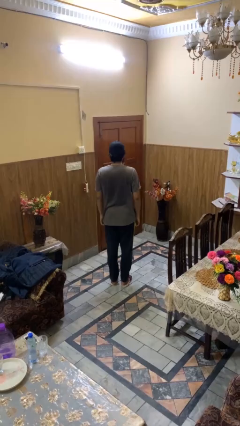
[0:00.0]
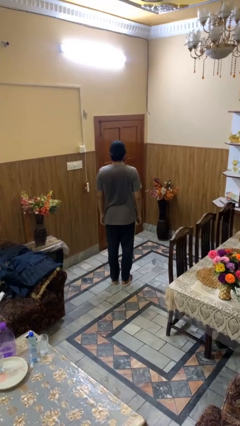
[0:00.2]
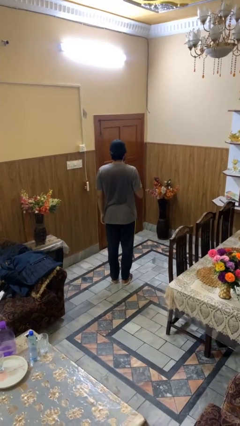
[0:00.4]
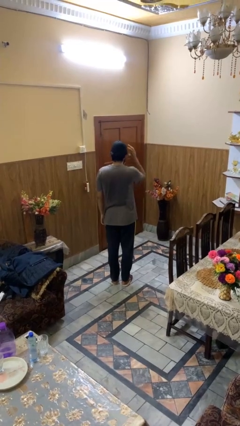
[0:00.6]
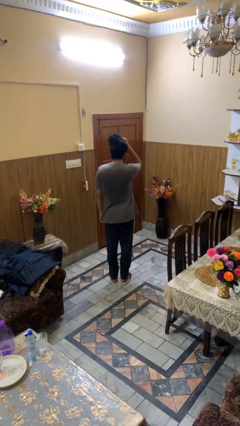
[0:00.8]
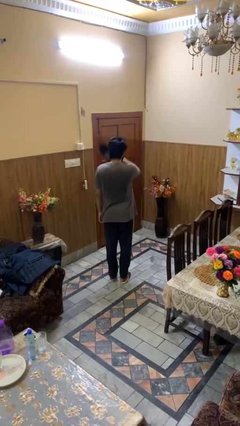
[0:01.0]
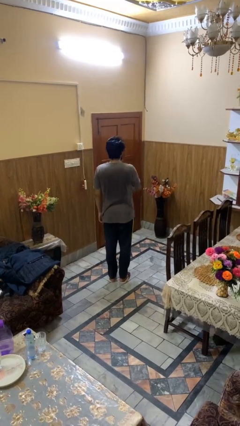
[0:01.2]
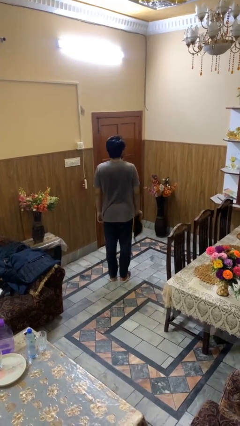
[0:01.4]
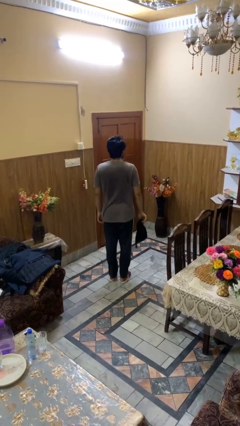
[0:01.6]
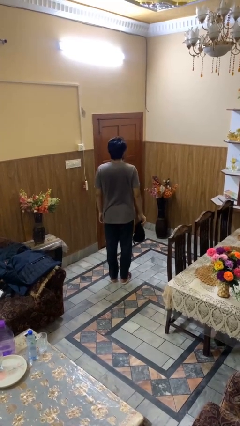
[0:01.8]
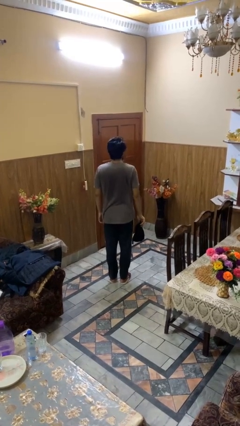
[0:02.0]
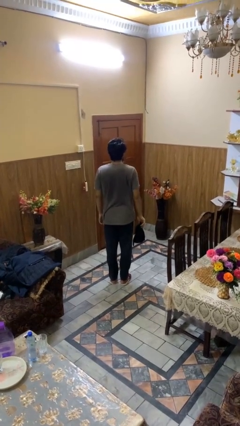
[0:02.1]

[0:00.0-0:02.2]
person takes off hat

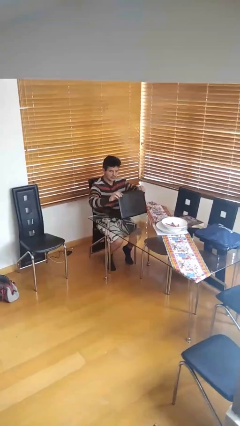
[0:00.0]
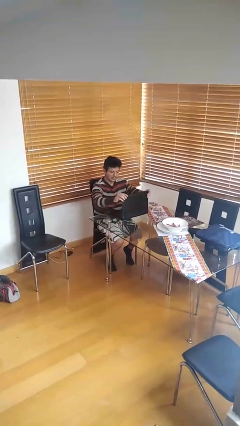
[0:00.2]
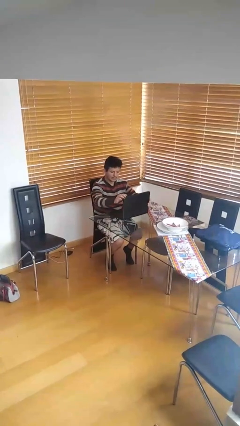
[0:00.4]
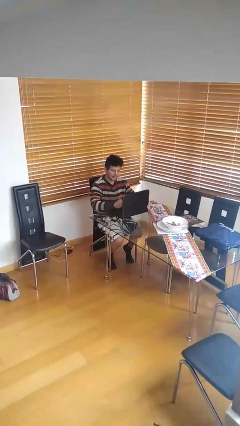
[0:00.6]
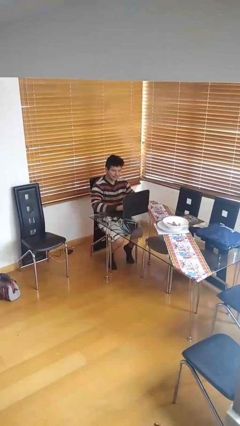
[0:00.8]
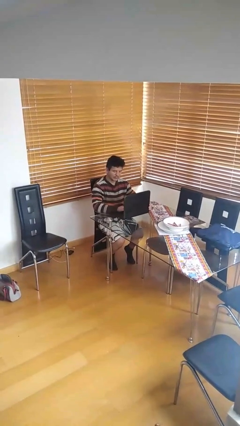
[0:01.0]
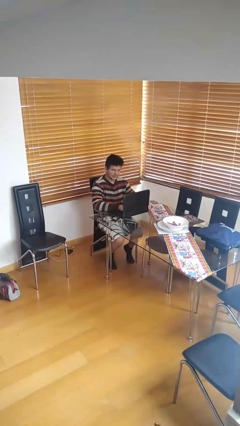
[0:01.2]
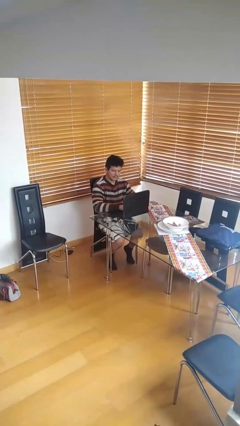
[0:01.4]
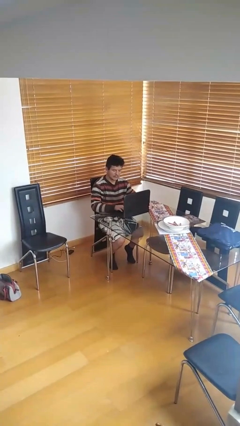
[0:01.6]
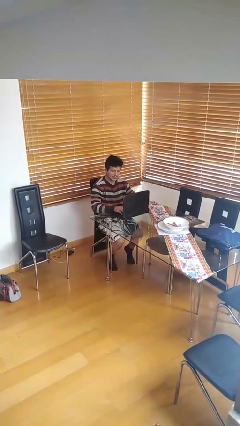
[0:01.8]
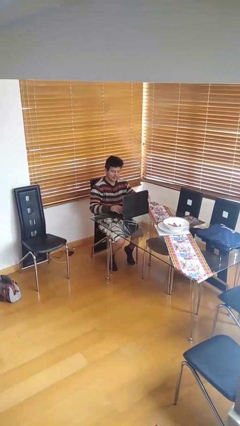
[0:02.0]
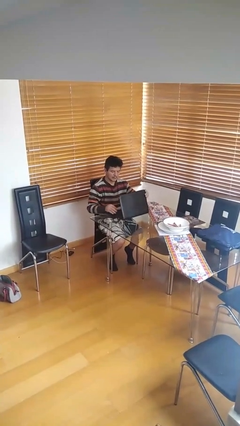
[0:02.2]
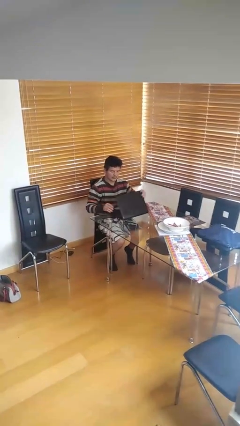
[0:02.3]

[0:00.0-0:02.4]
person interacts with laptop

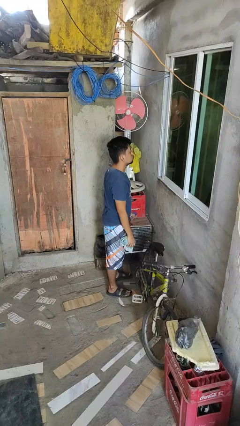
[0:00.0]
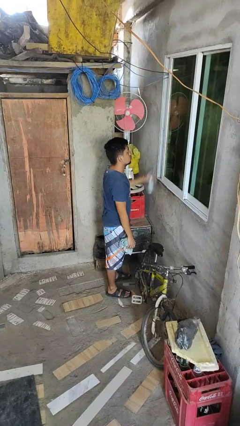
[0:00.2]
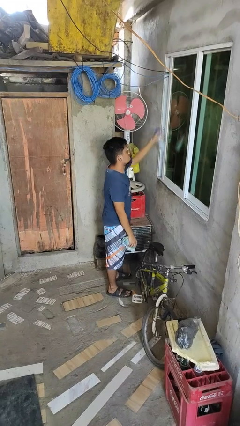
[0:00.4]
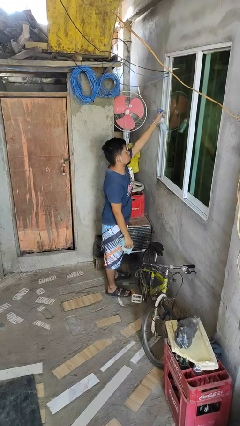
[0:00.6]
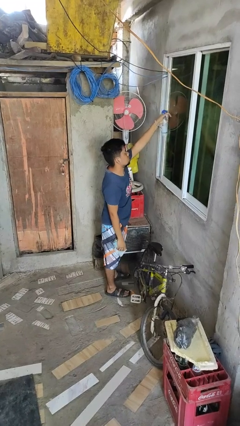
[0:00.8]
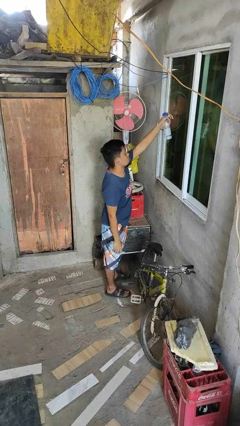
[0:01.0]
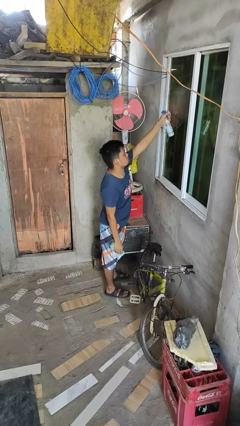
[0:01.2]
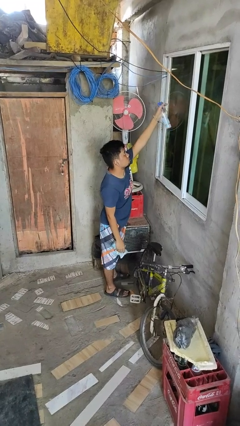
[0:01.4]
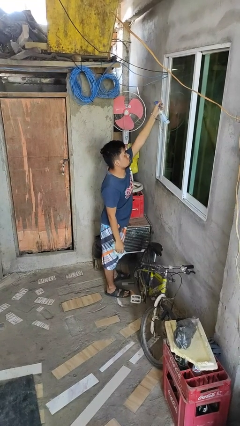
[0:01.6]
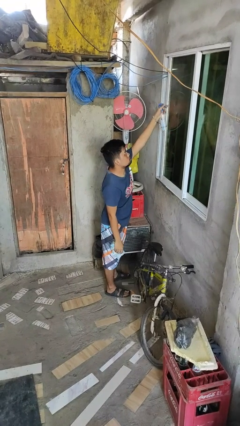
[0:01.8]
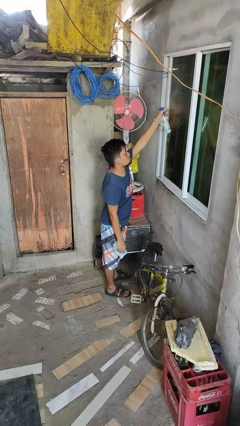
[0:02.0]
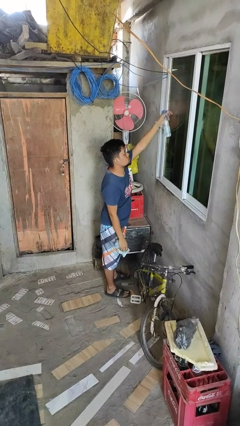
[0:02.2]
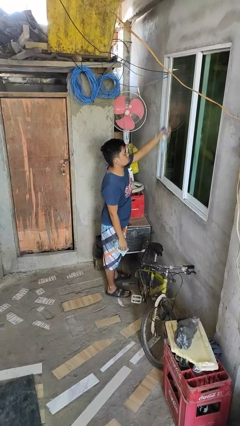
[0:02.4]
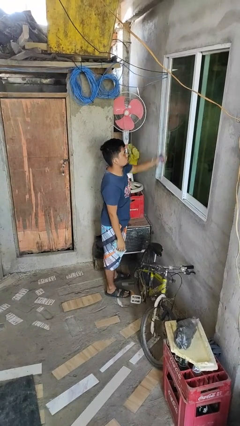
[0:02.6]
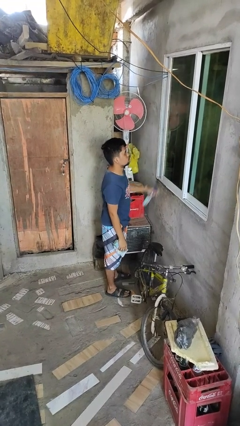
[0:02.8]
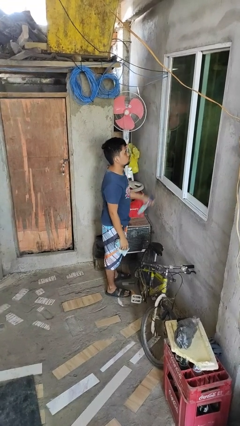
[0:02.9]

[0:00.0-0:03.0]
person sprays from bottle

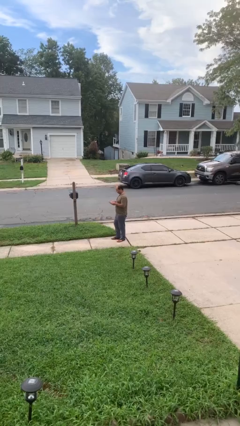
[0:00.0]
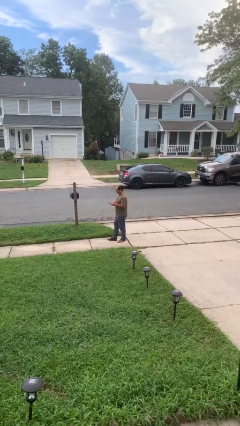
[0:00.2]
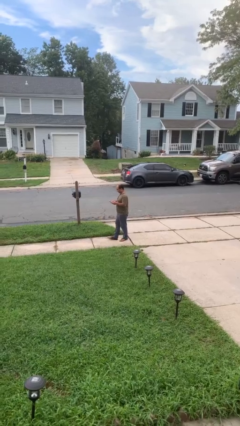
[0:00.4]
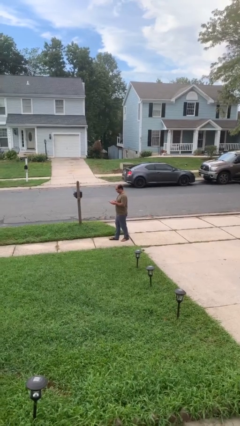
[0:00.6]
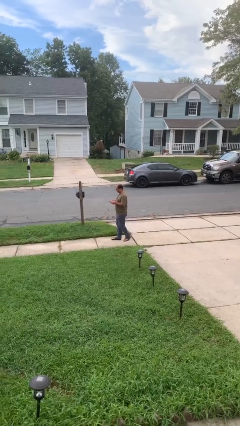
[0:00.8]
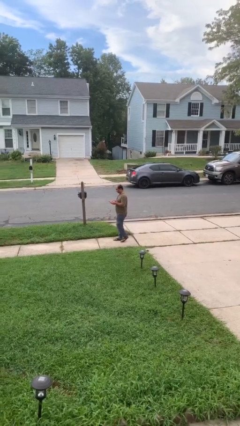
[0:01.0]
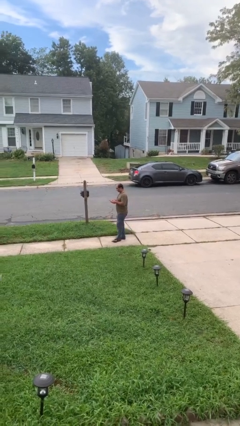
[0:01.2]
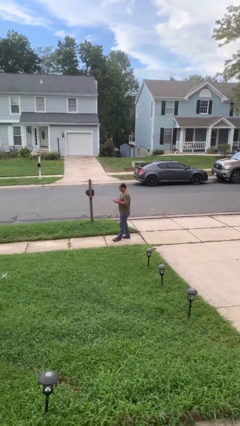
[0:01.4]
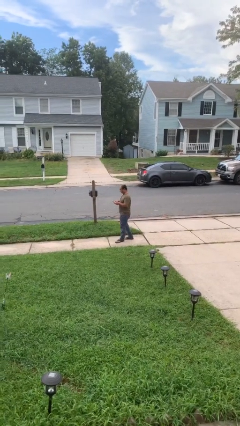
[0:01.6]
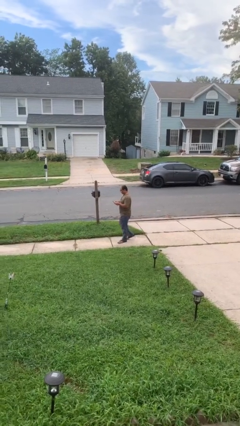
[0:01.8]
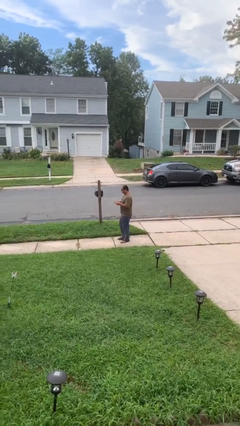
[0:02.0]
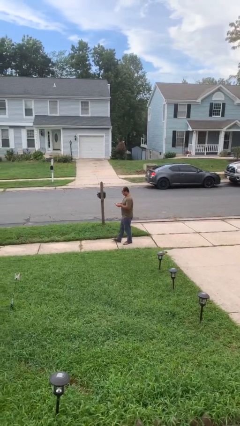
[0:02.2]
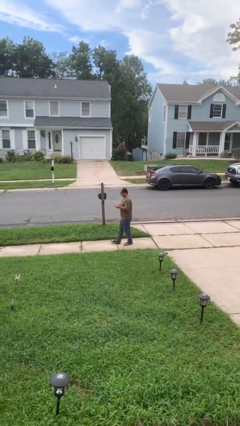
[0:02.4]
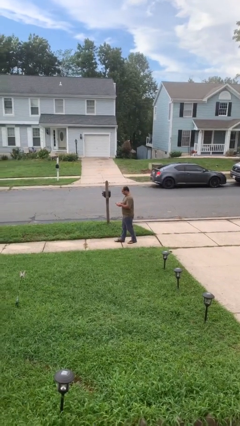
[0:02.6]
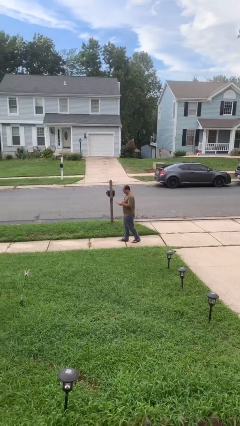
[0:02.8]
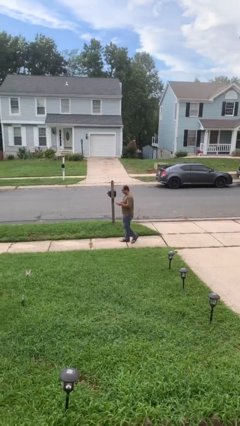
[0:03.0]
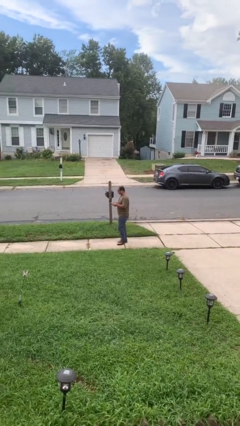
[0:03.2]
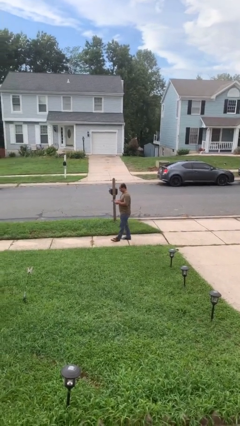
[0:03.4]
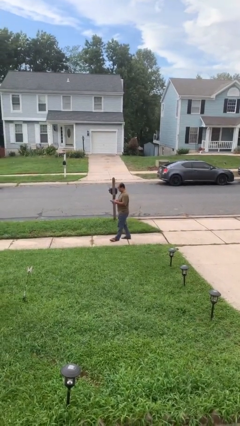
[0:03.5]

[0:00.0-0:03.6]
person texts on phone

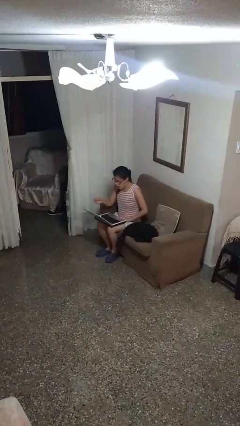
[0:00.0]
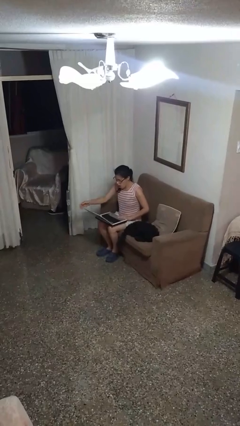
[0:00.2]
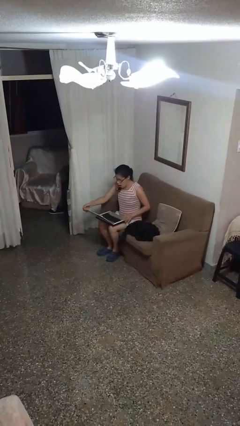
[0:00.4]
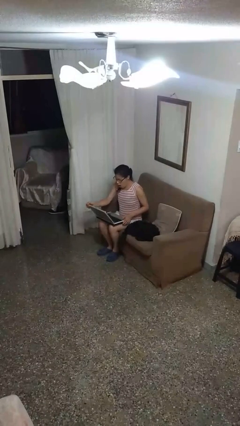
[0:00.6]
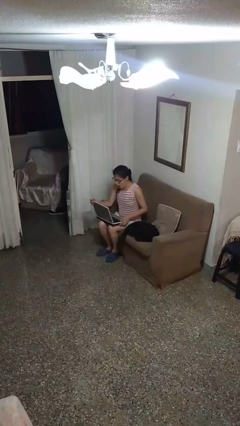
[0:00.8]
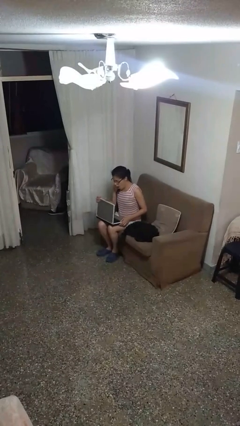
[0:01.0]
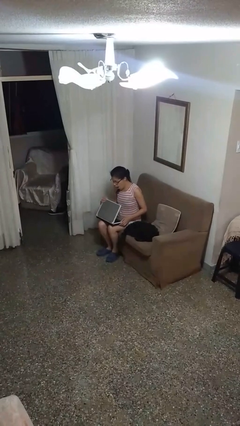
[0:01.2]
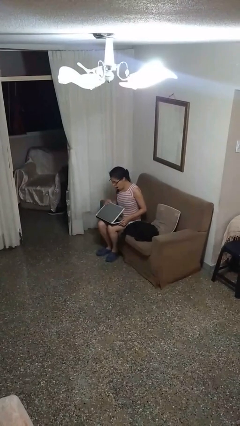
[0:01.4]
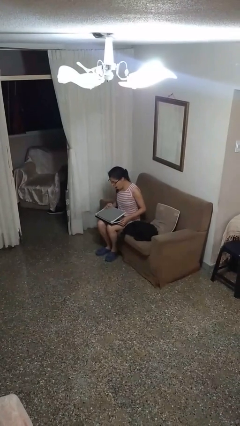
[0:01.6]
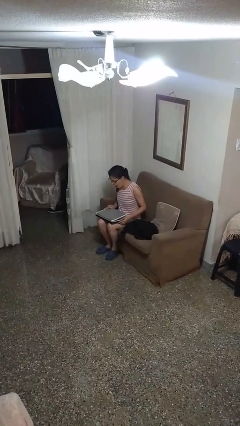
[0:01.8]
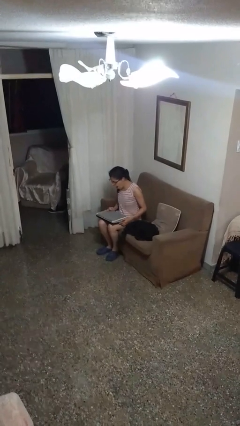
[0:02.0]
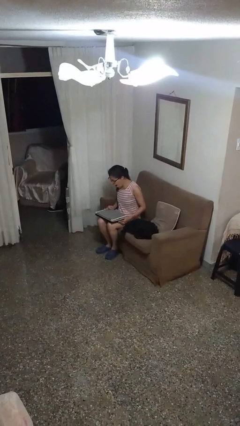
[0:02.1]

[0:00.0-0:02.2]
person closes laptop

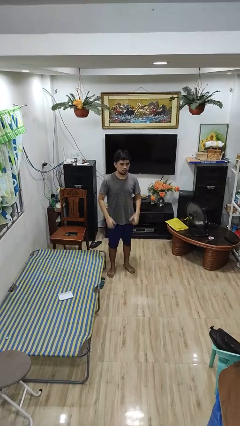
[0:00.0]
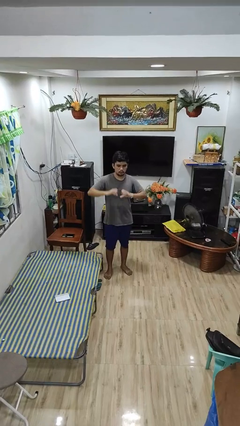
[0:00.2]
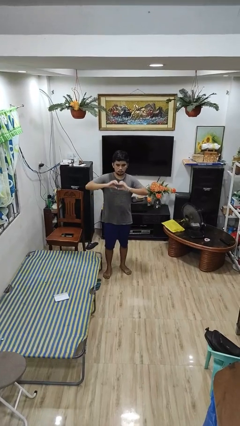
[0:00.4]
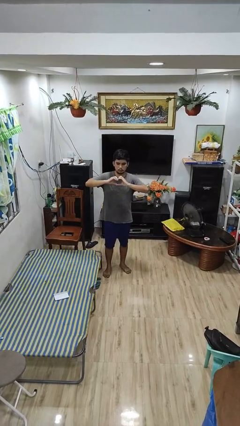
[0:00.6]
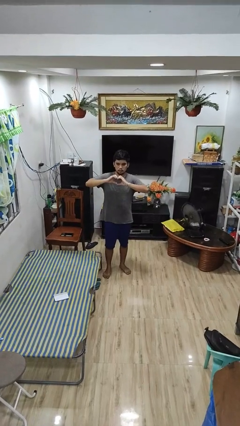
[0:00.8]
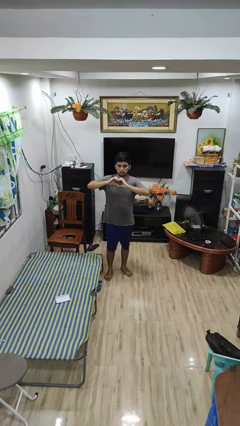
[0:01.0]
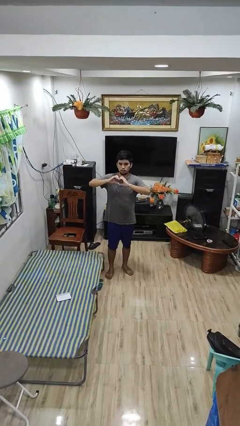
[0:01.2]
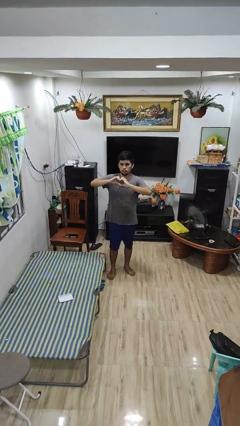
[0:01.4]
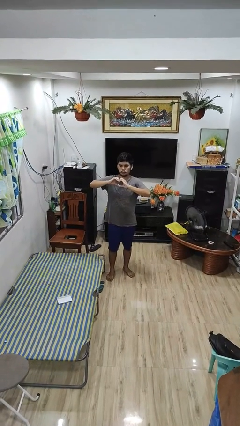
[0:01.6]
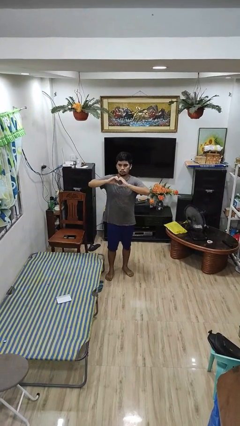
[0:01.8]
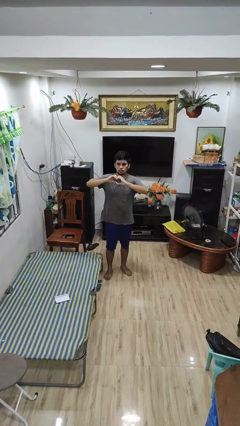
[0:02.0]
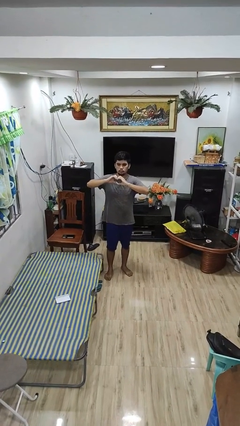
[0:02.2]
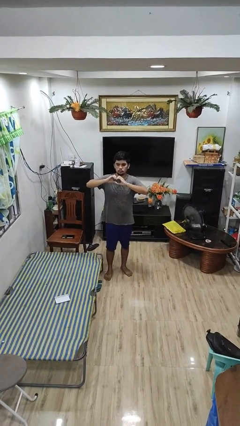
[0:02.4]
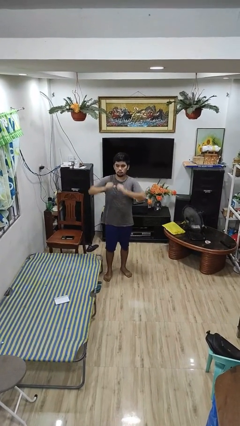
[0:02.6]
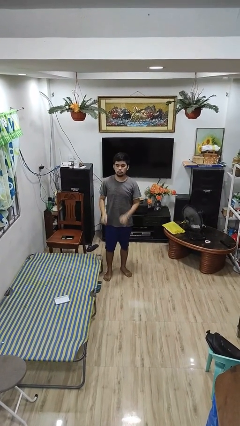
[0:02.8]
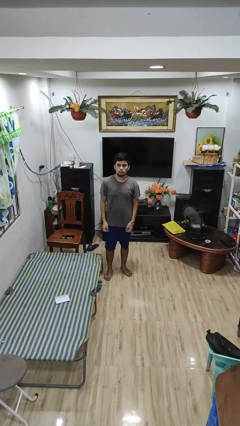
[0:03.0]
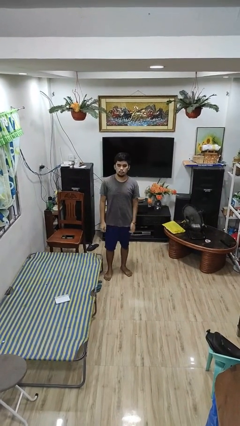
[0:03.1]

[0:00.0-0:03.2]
person gestures heart

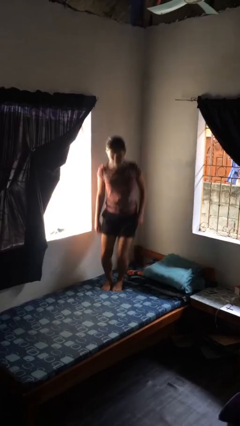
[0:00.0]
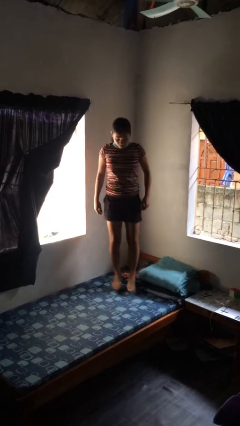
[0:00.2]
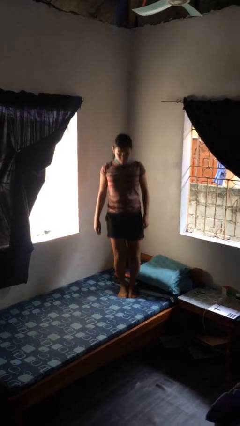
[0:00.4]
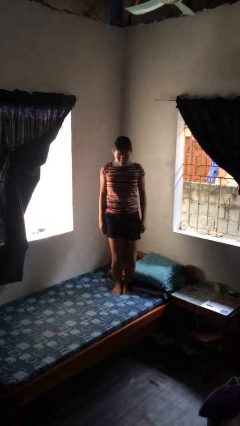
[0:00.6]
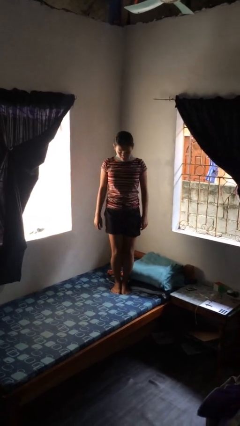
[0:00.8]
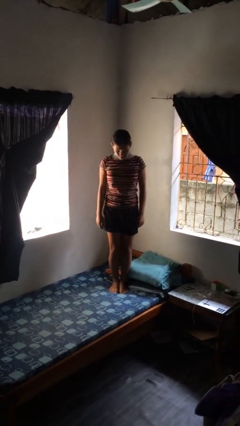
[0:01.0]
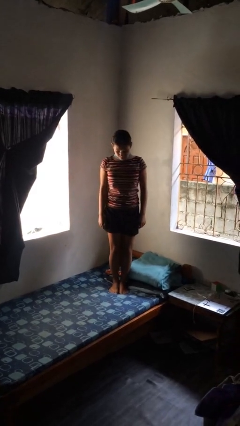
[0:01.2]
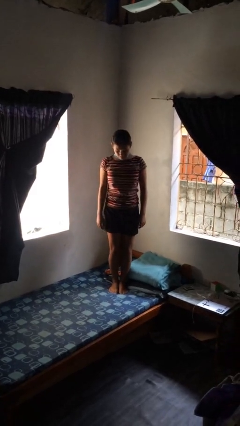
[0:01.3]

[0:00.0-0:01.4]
person jumps on bed
